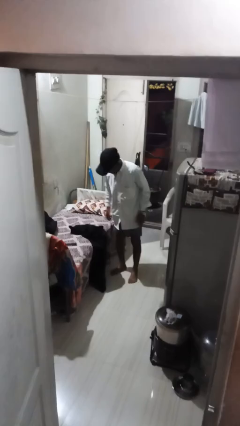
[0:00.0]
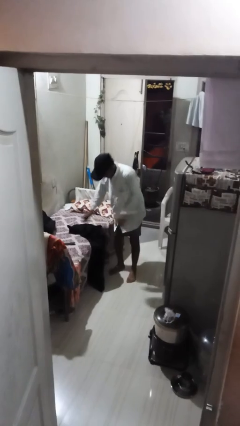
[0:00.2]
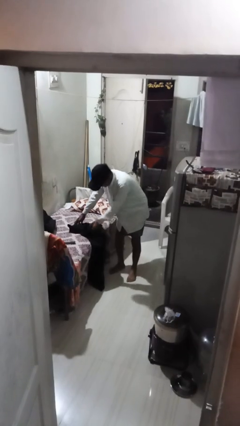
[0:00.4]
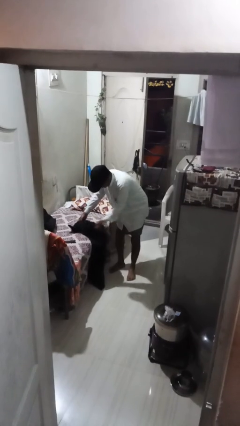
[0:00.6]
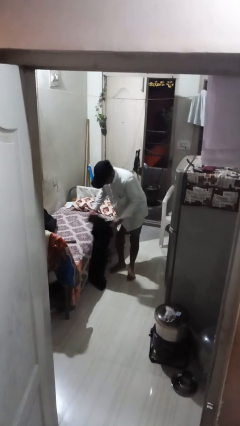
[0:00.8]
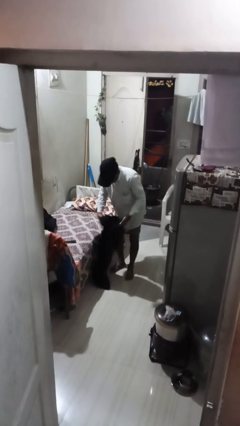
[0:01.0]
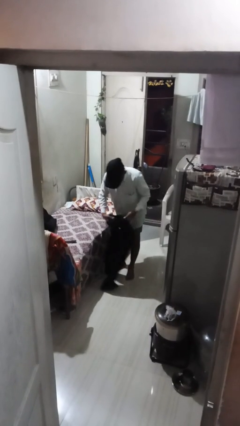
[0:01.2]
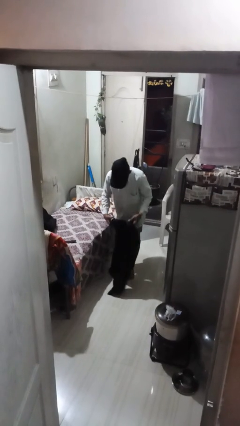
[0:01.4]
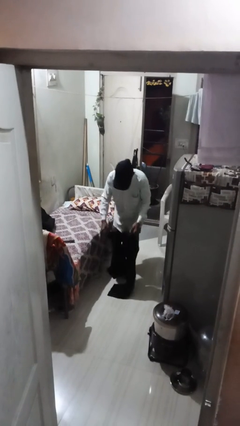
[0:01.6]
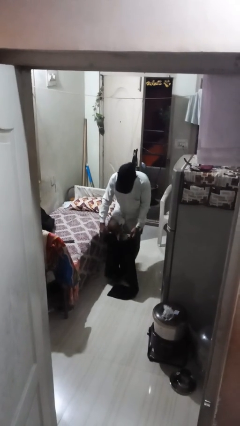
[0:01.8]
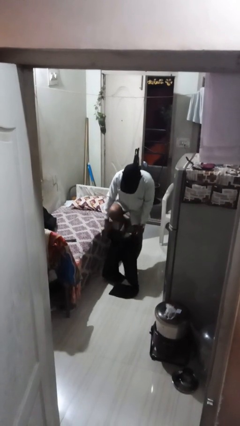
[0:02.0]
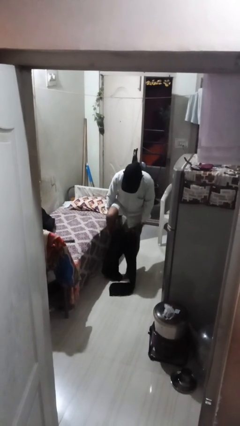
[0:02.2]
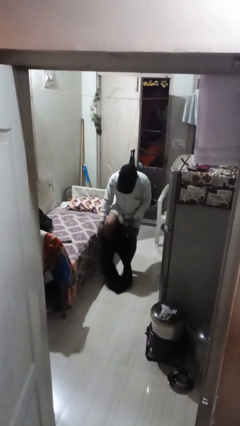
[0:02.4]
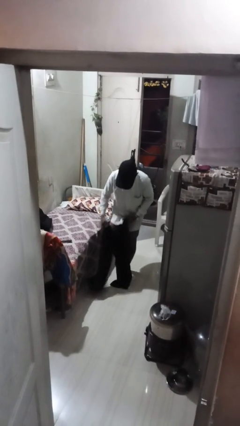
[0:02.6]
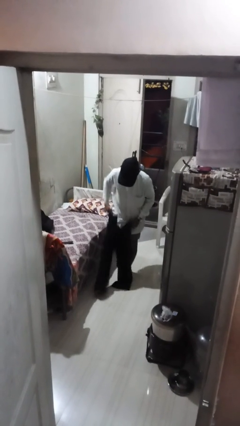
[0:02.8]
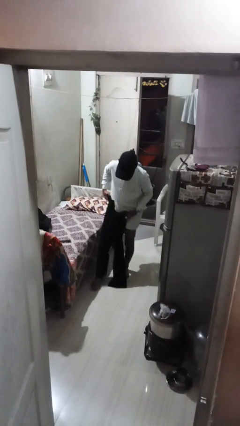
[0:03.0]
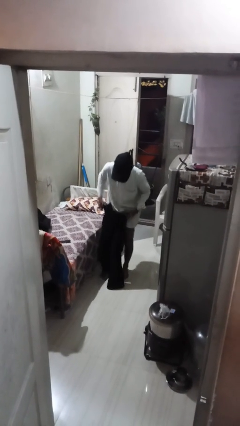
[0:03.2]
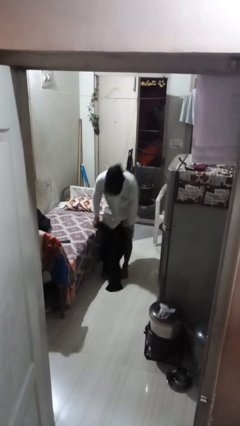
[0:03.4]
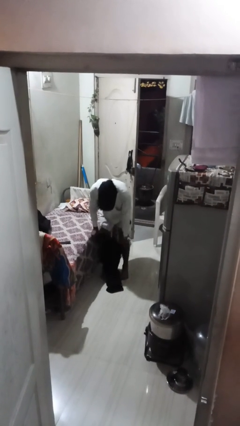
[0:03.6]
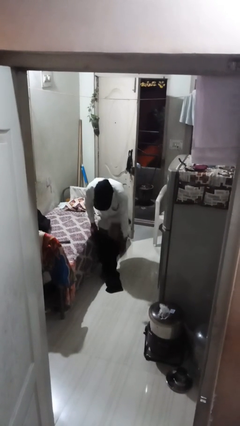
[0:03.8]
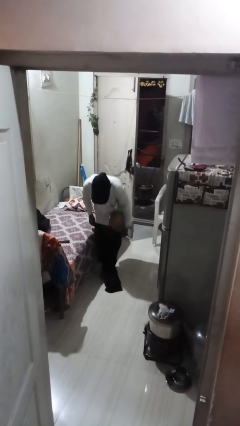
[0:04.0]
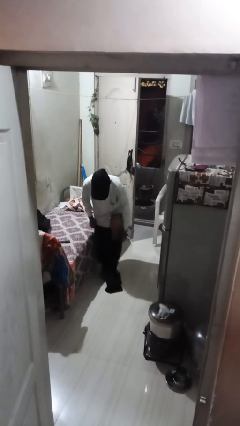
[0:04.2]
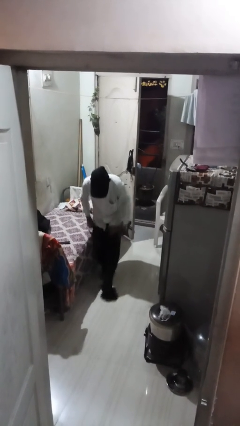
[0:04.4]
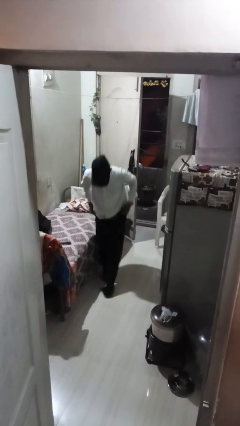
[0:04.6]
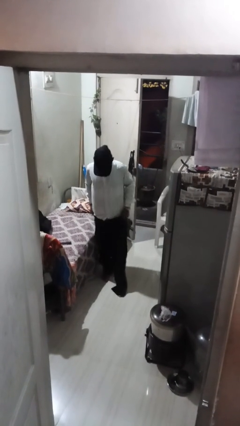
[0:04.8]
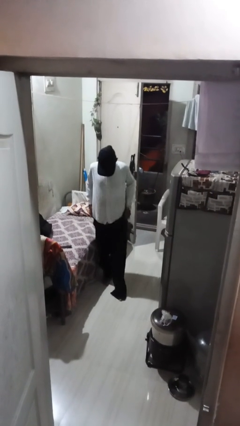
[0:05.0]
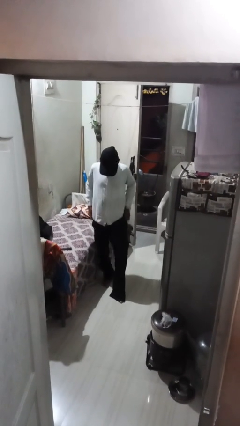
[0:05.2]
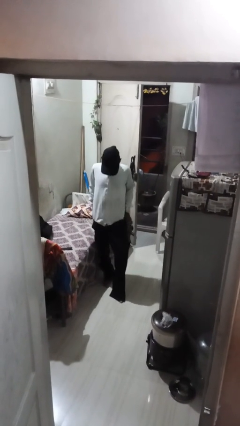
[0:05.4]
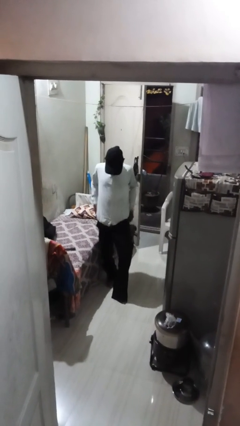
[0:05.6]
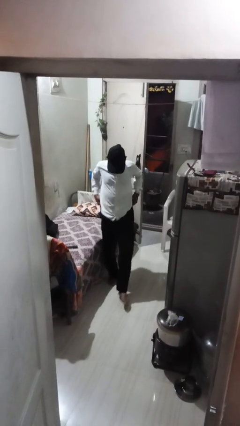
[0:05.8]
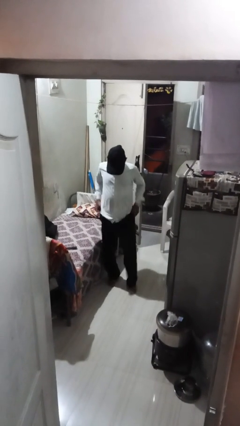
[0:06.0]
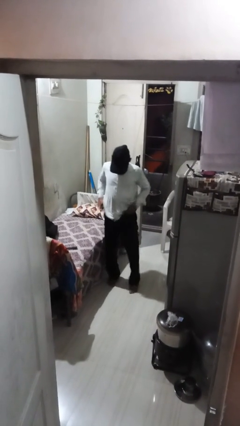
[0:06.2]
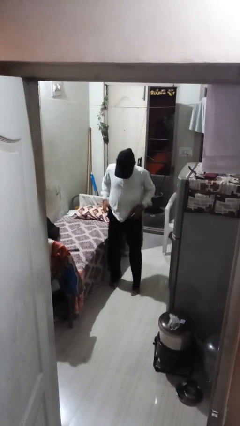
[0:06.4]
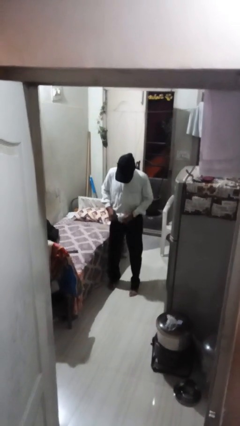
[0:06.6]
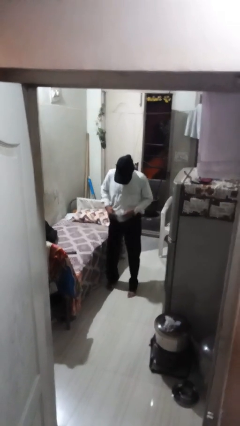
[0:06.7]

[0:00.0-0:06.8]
person puts on pants

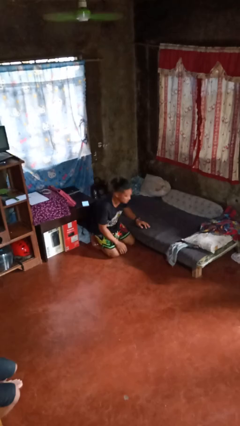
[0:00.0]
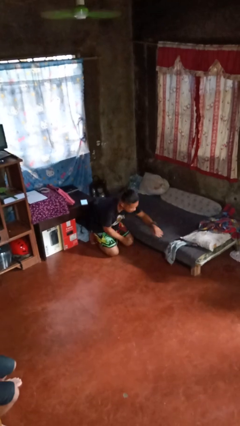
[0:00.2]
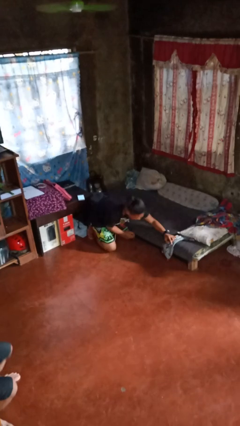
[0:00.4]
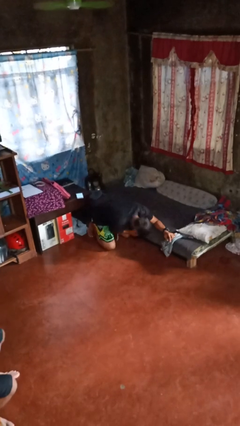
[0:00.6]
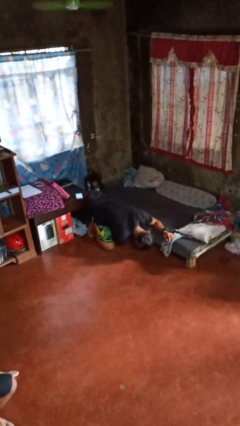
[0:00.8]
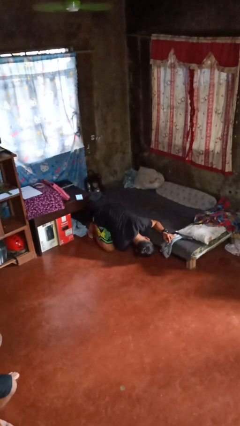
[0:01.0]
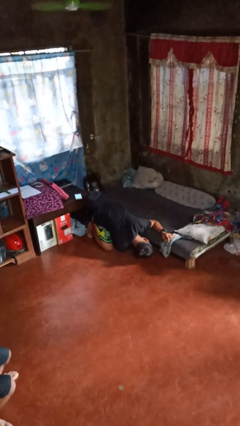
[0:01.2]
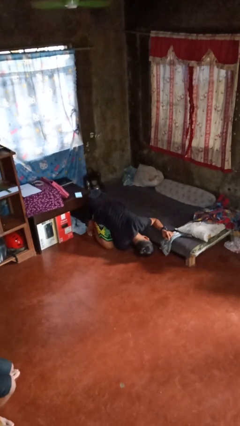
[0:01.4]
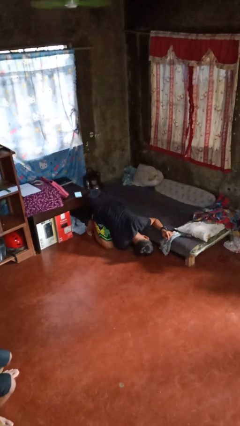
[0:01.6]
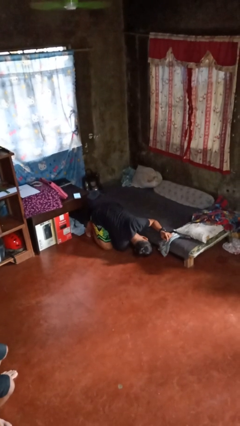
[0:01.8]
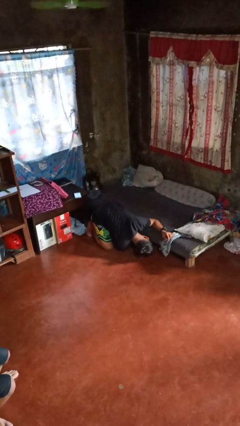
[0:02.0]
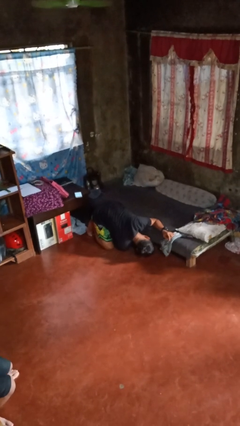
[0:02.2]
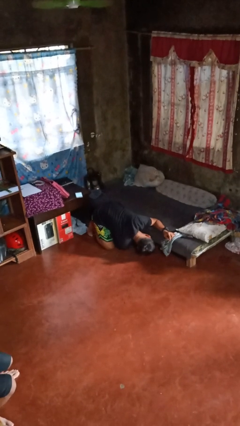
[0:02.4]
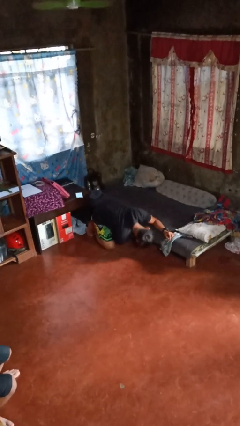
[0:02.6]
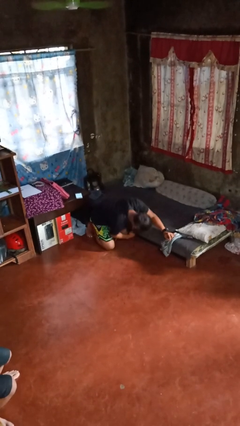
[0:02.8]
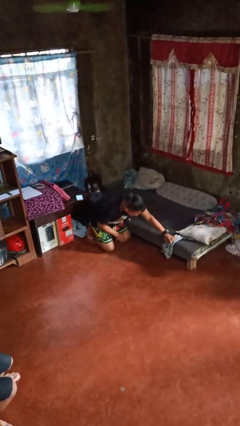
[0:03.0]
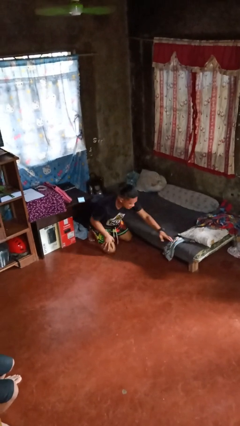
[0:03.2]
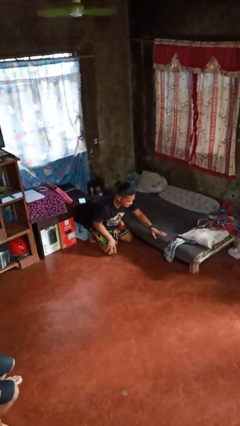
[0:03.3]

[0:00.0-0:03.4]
person searches under bed

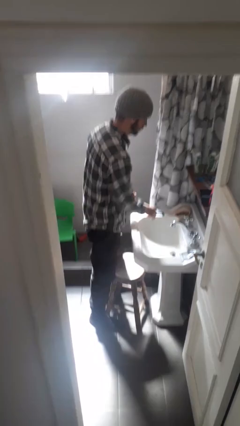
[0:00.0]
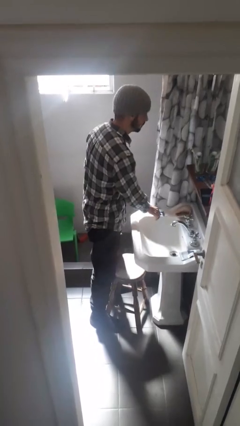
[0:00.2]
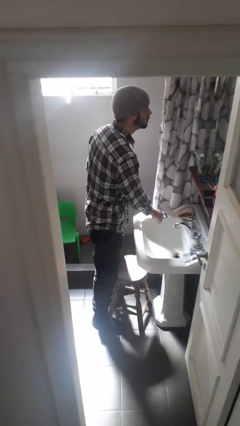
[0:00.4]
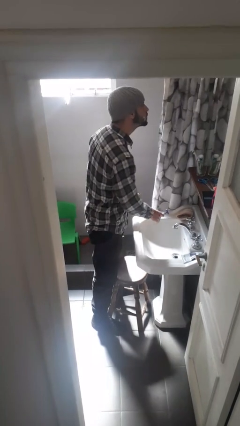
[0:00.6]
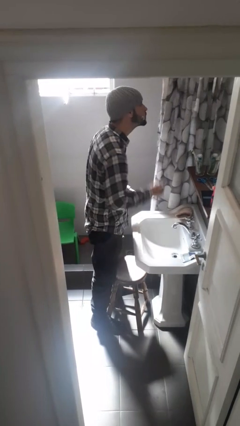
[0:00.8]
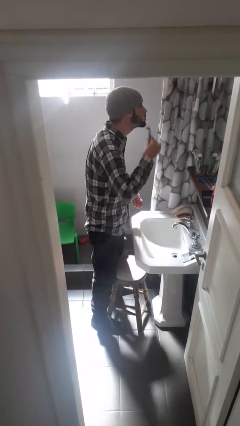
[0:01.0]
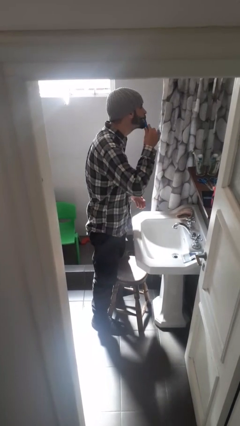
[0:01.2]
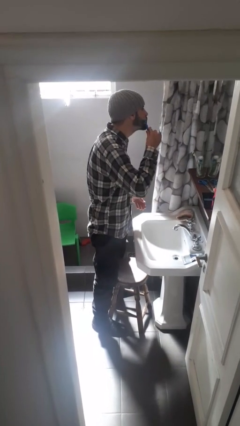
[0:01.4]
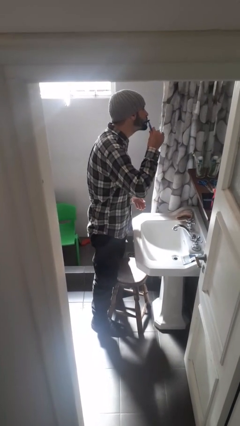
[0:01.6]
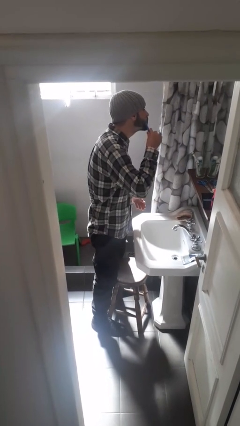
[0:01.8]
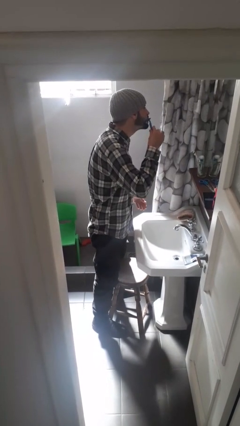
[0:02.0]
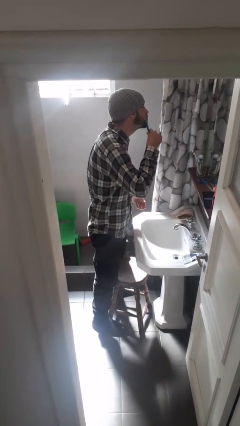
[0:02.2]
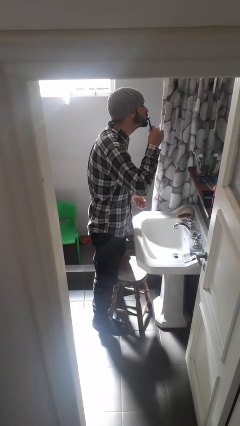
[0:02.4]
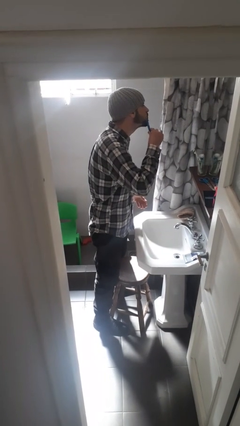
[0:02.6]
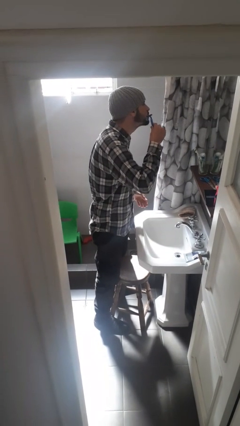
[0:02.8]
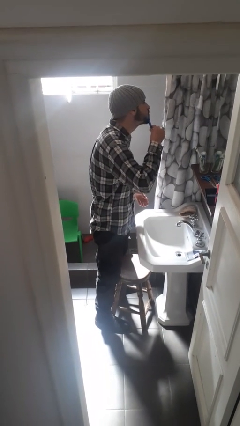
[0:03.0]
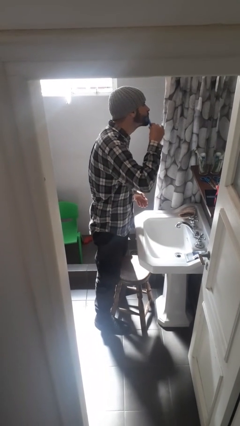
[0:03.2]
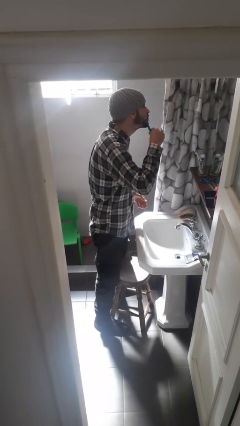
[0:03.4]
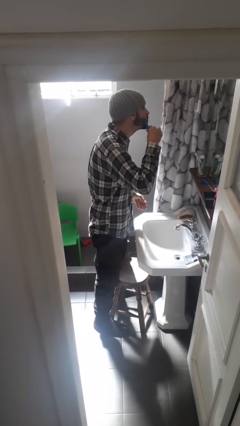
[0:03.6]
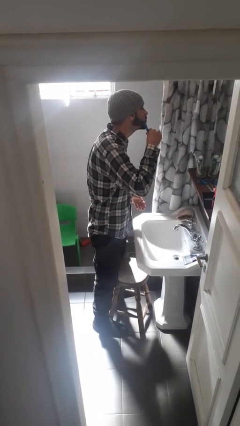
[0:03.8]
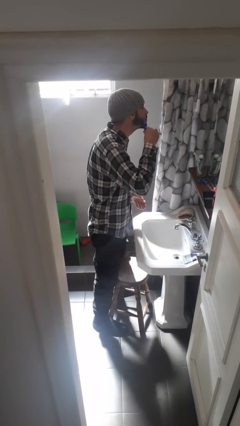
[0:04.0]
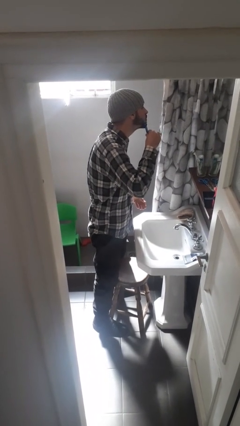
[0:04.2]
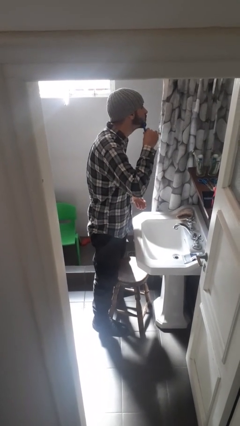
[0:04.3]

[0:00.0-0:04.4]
person shaves face

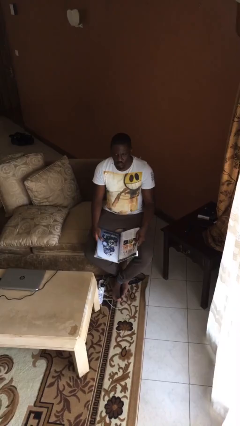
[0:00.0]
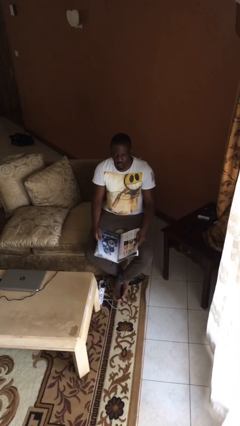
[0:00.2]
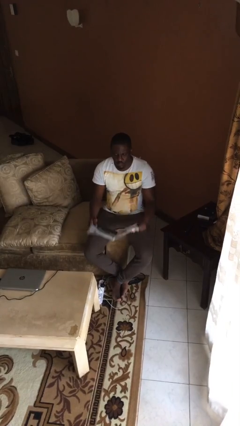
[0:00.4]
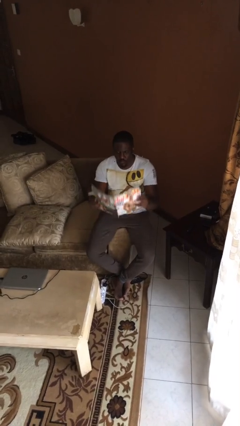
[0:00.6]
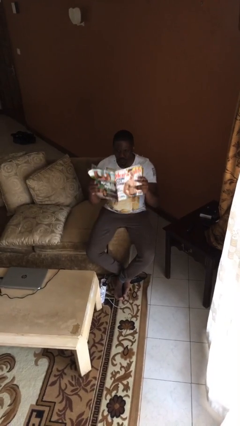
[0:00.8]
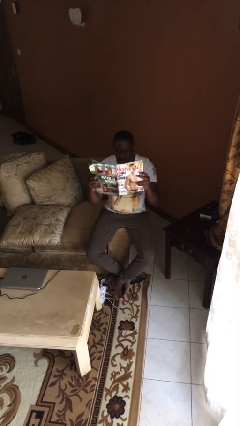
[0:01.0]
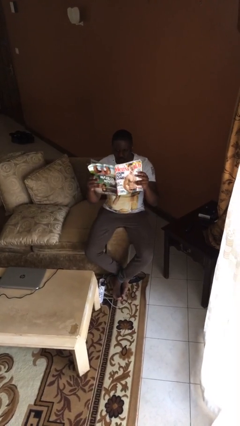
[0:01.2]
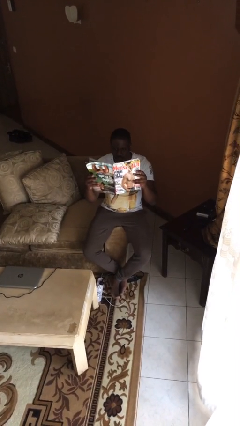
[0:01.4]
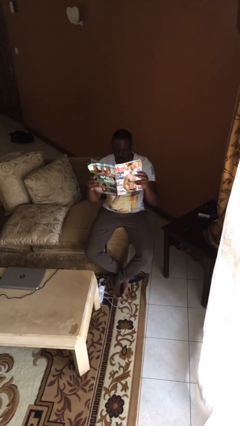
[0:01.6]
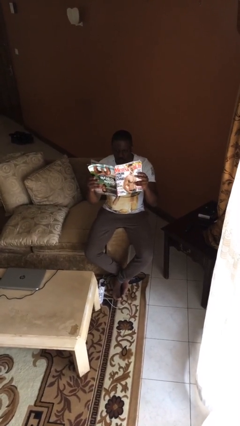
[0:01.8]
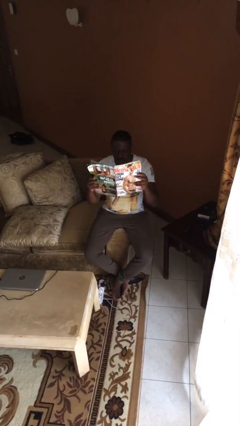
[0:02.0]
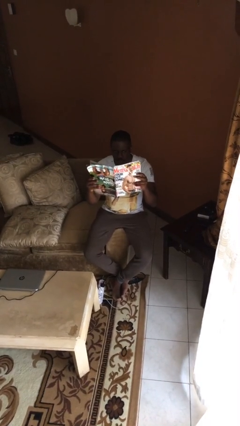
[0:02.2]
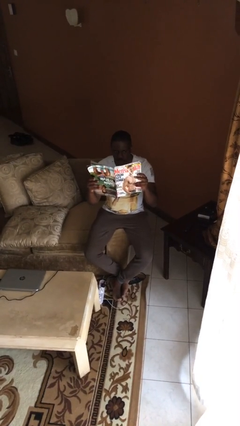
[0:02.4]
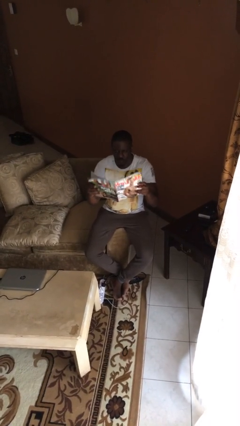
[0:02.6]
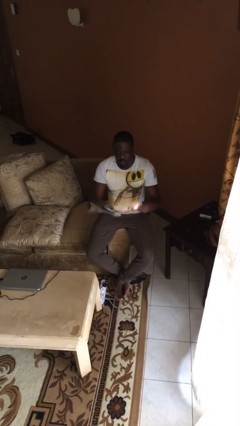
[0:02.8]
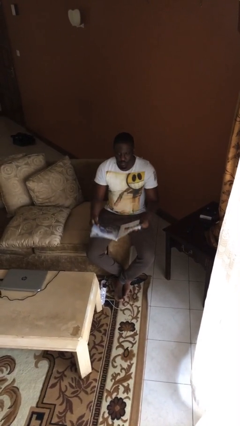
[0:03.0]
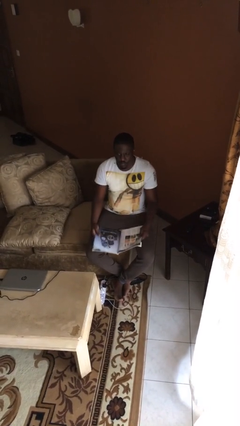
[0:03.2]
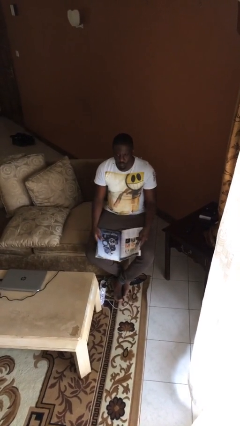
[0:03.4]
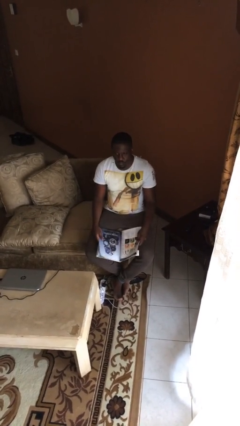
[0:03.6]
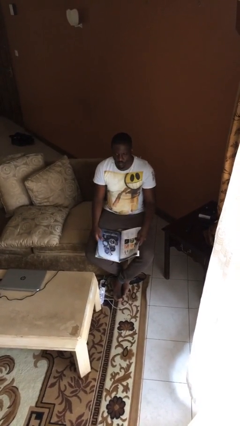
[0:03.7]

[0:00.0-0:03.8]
person reads document
